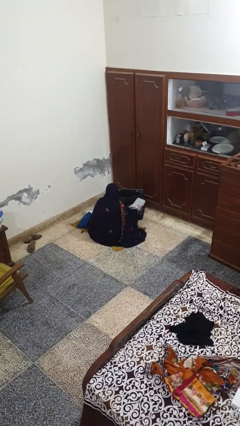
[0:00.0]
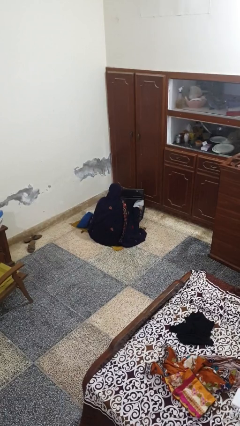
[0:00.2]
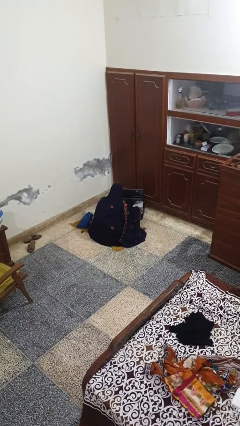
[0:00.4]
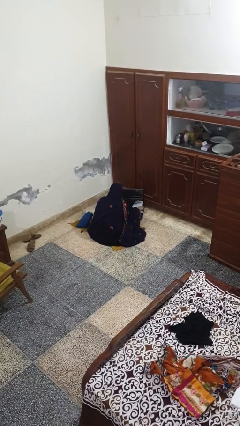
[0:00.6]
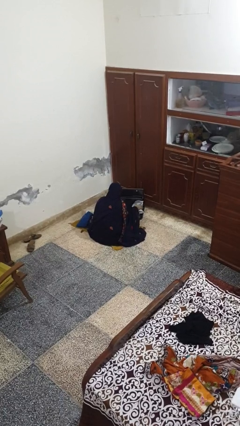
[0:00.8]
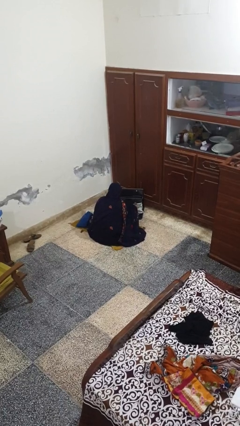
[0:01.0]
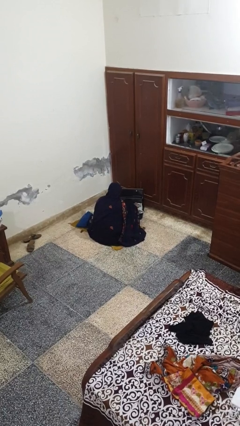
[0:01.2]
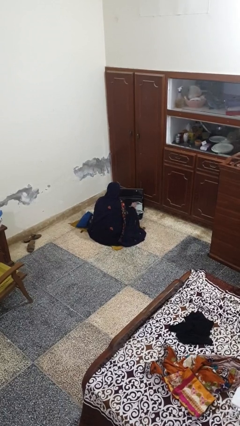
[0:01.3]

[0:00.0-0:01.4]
person loads clothes into suitcase

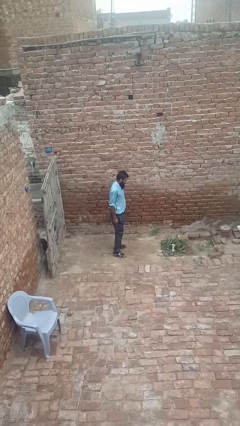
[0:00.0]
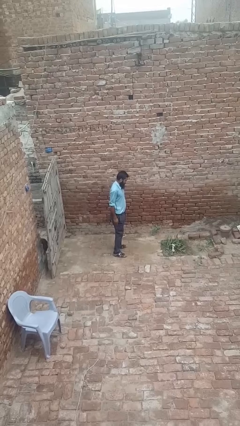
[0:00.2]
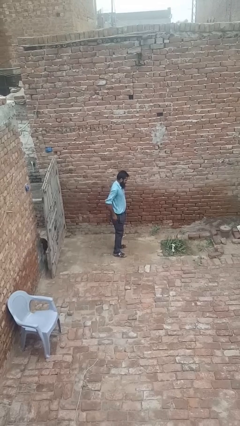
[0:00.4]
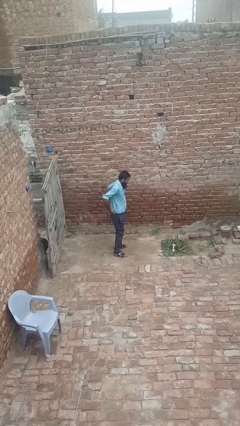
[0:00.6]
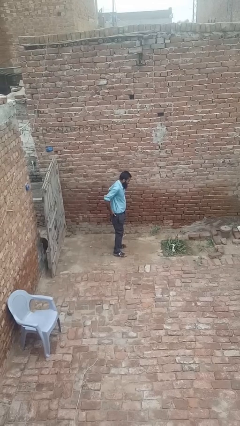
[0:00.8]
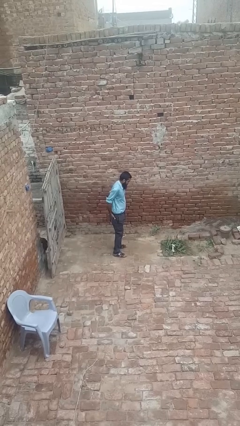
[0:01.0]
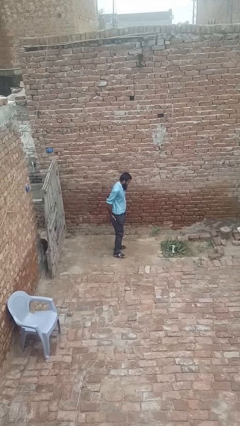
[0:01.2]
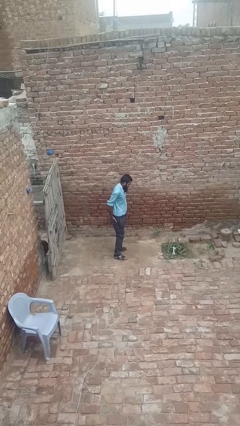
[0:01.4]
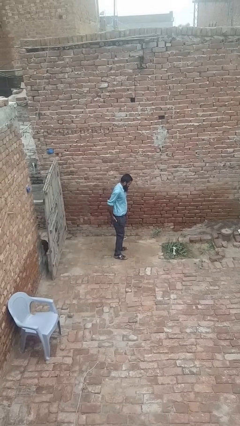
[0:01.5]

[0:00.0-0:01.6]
person puts hands in back pockets

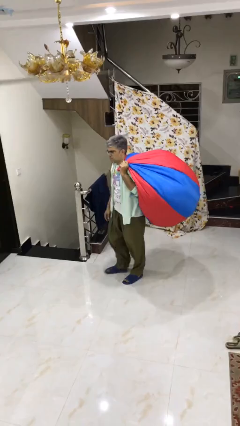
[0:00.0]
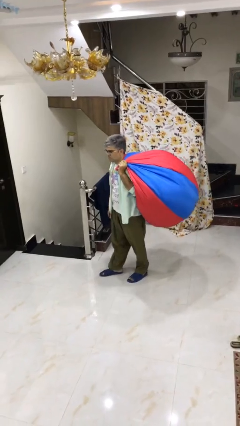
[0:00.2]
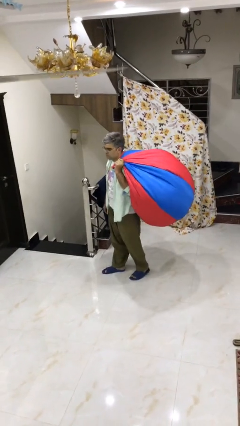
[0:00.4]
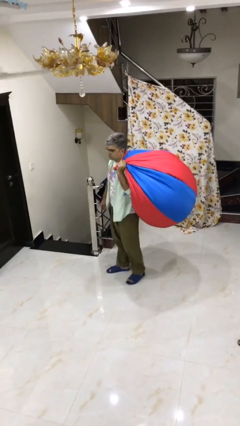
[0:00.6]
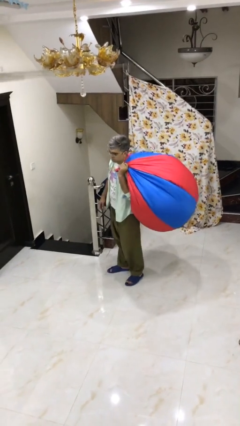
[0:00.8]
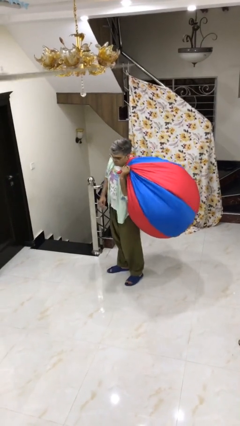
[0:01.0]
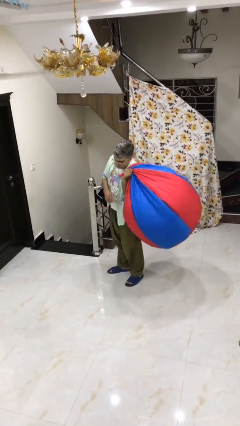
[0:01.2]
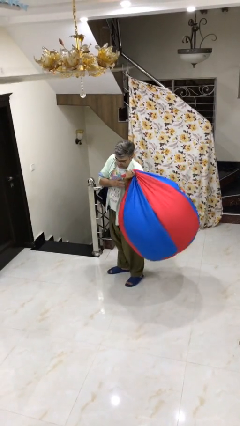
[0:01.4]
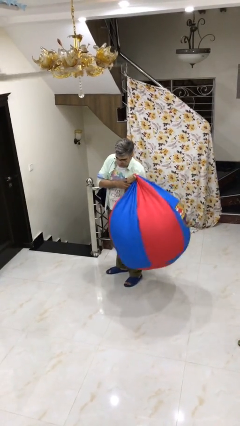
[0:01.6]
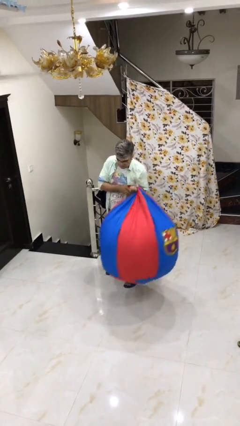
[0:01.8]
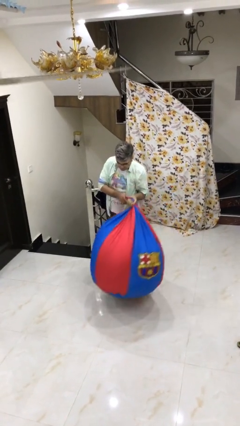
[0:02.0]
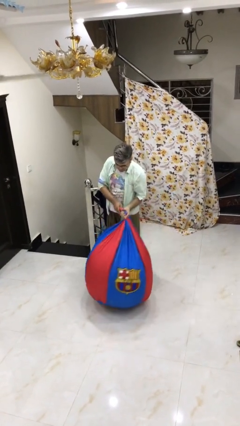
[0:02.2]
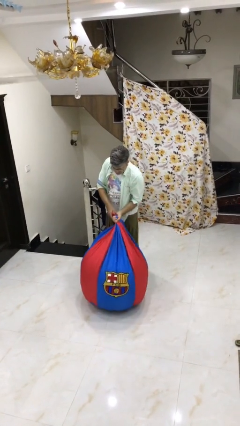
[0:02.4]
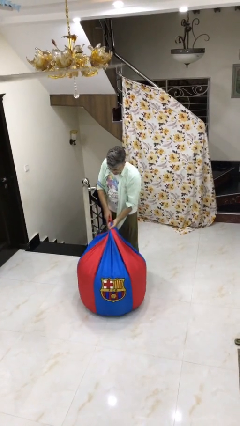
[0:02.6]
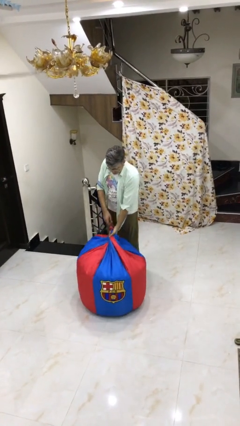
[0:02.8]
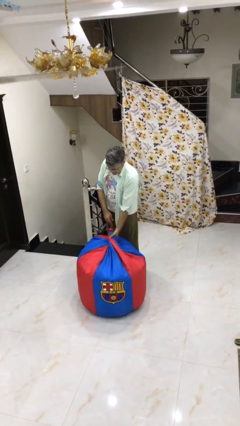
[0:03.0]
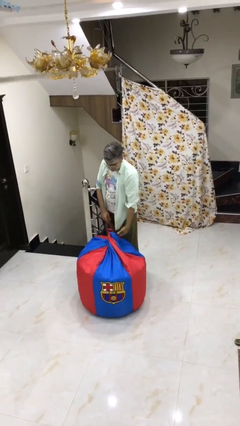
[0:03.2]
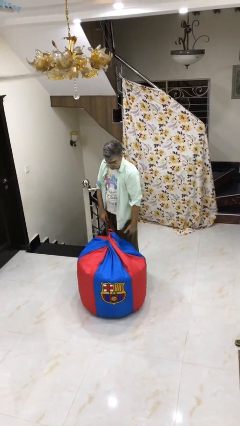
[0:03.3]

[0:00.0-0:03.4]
person puts down object on floor

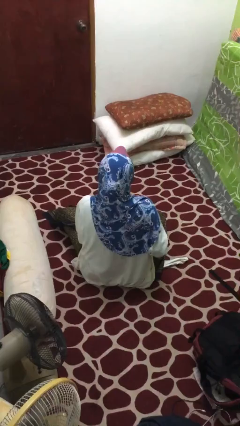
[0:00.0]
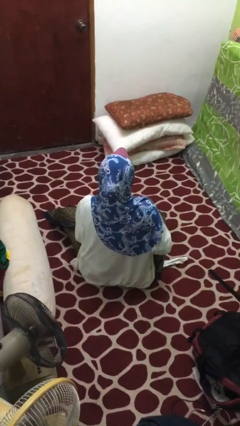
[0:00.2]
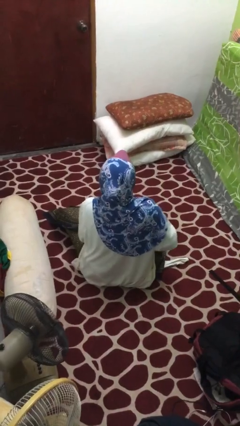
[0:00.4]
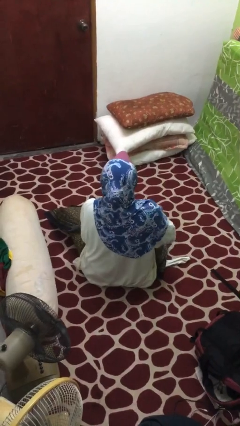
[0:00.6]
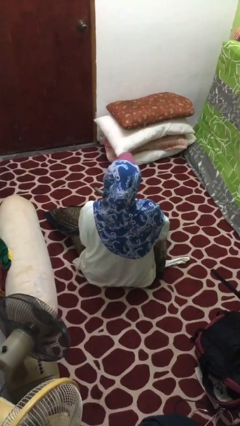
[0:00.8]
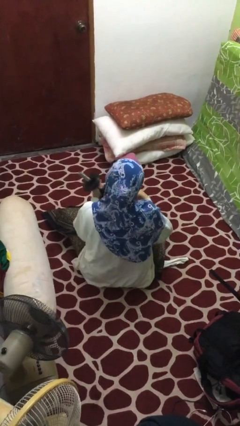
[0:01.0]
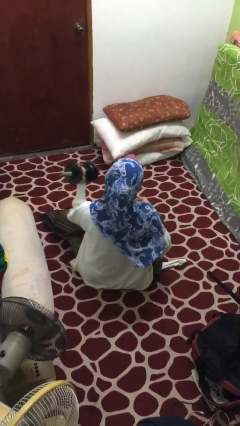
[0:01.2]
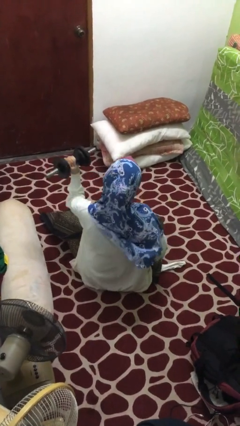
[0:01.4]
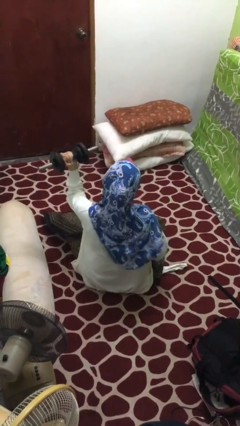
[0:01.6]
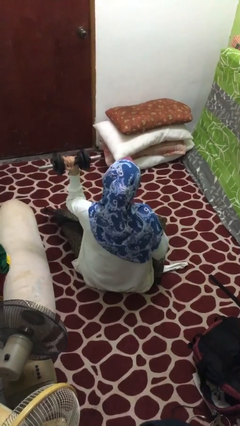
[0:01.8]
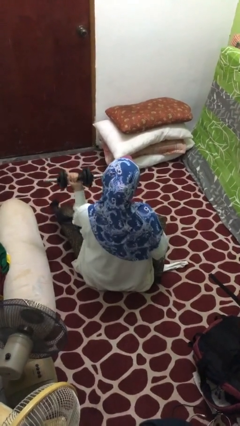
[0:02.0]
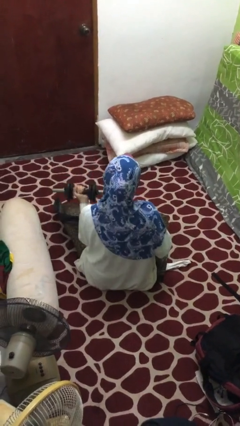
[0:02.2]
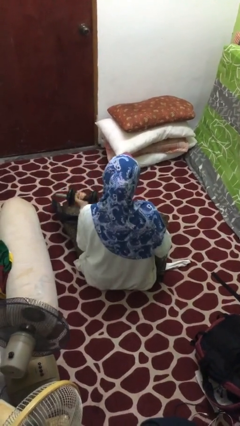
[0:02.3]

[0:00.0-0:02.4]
person lifts dumbbells

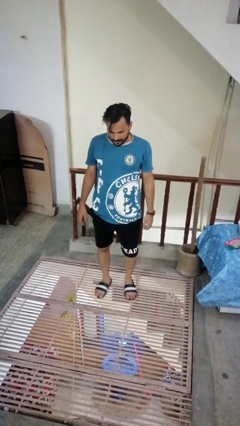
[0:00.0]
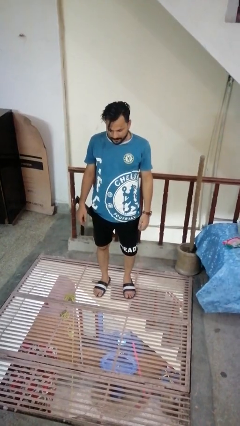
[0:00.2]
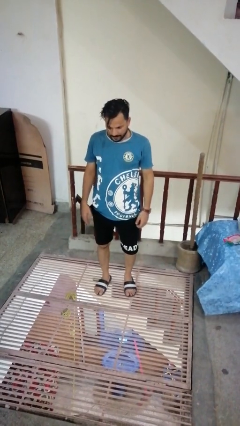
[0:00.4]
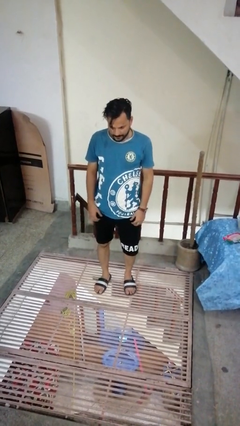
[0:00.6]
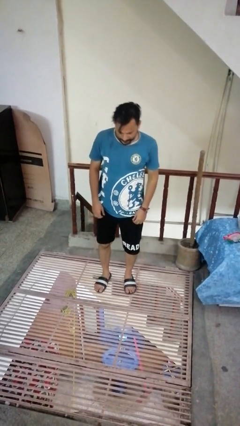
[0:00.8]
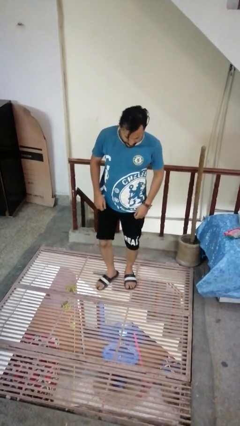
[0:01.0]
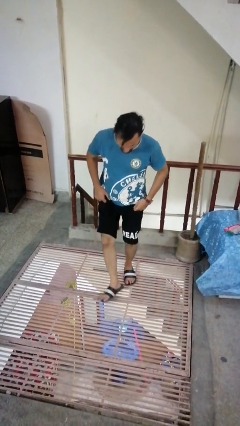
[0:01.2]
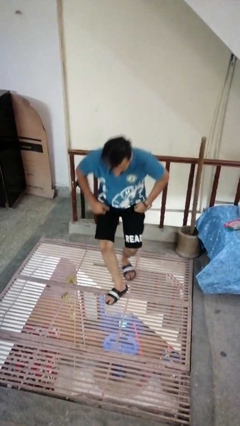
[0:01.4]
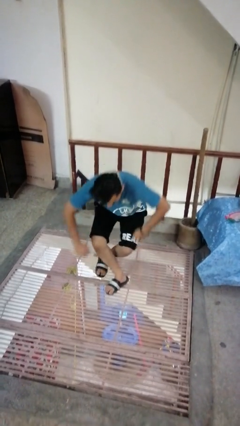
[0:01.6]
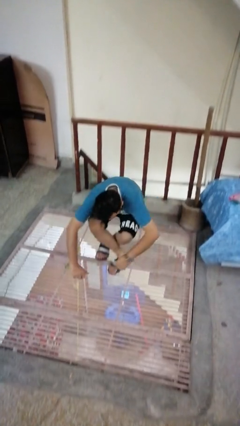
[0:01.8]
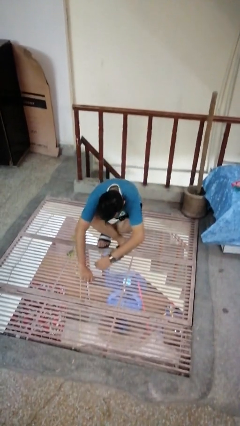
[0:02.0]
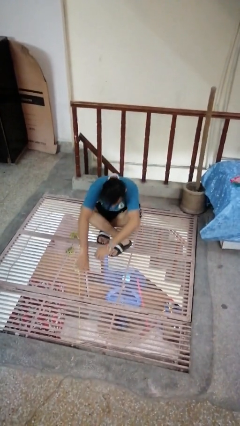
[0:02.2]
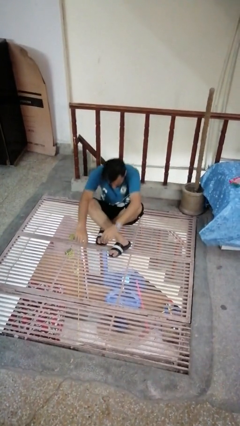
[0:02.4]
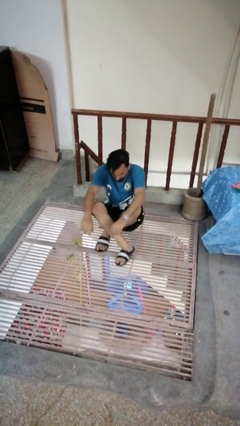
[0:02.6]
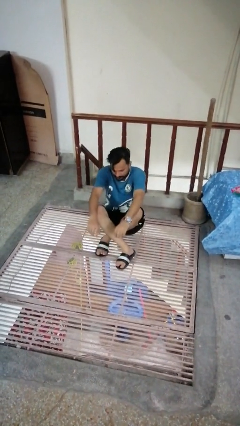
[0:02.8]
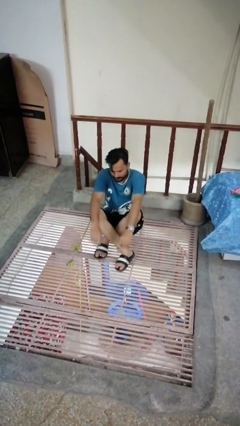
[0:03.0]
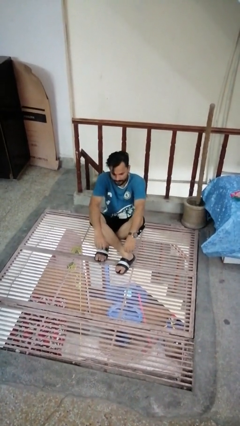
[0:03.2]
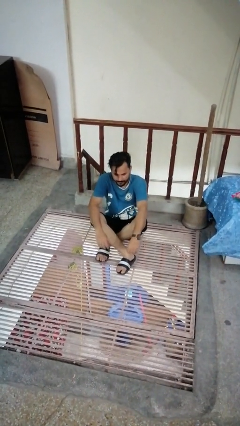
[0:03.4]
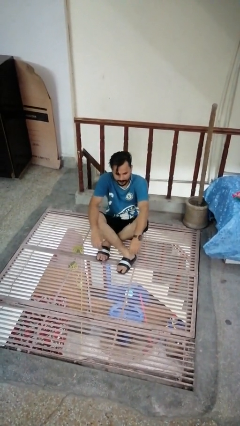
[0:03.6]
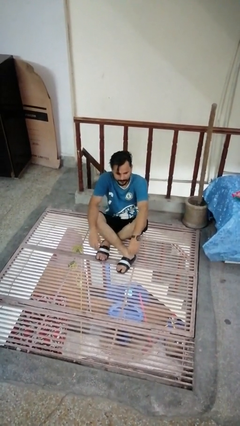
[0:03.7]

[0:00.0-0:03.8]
person sits crisscross

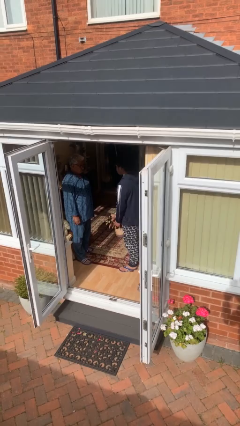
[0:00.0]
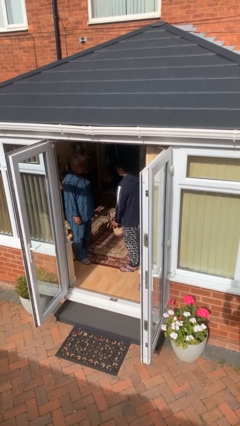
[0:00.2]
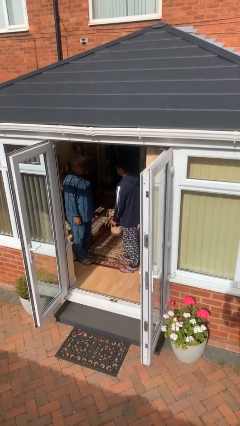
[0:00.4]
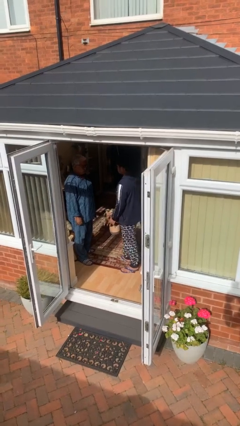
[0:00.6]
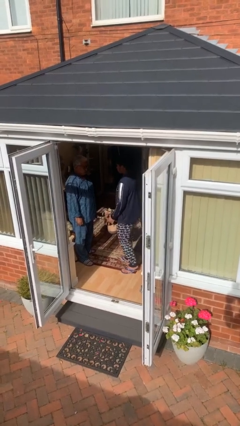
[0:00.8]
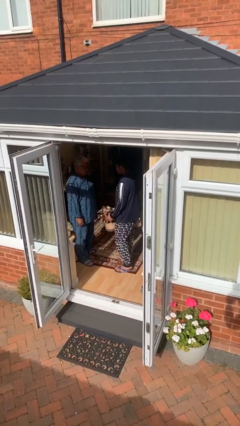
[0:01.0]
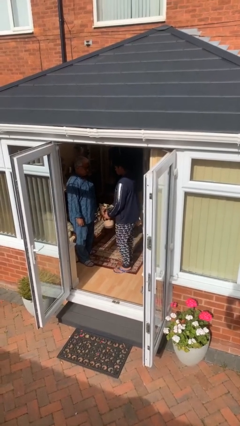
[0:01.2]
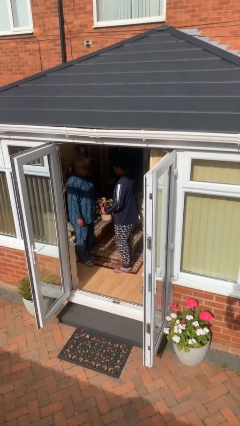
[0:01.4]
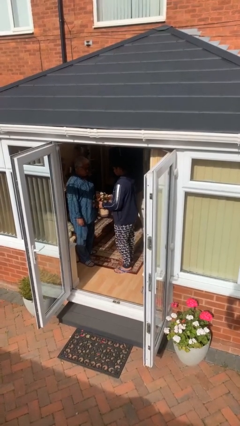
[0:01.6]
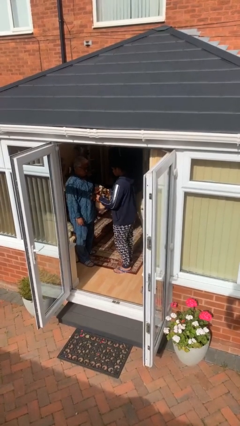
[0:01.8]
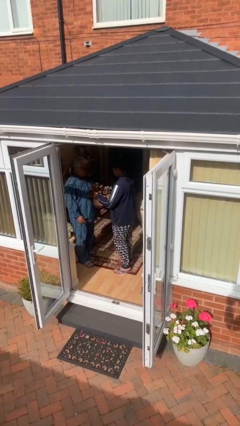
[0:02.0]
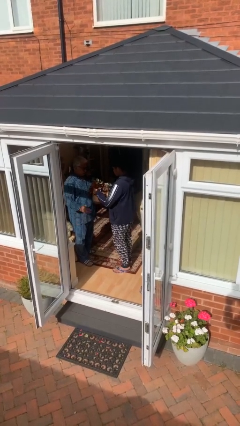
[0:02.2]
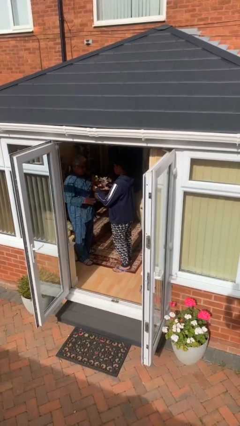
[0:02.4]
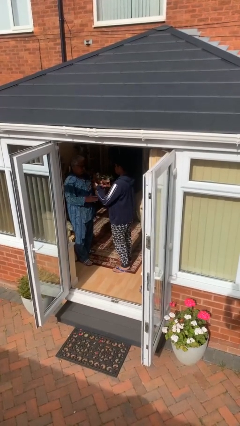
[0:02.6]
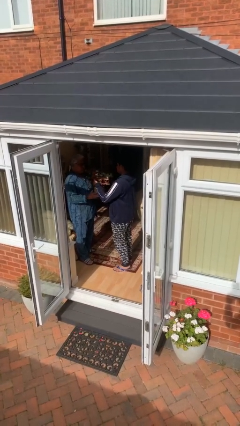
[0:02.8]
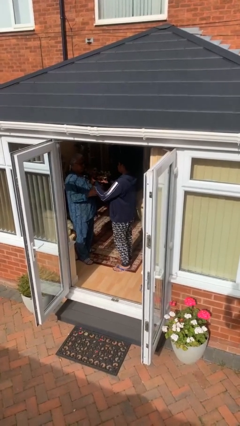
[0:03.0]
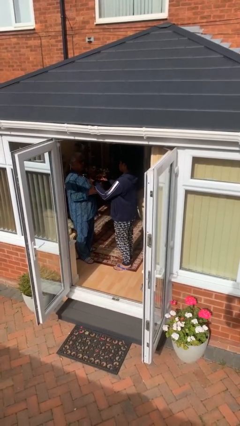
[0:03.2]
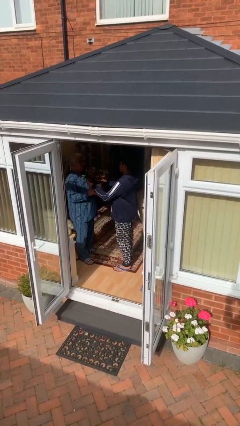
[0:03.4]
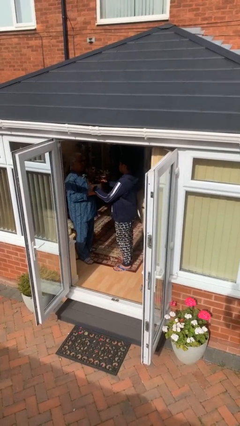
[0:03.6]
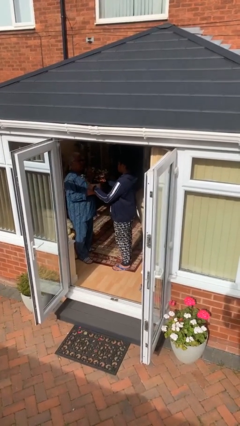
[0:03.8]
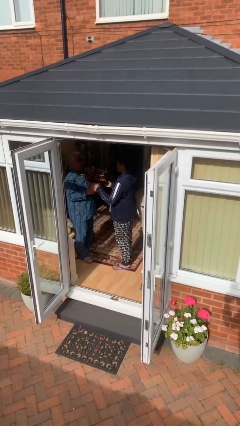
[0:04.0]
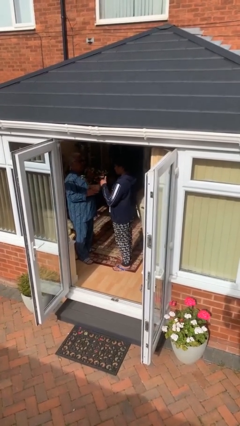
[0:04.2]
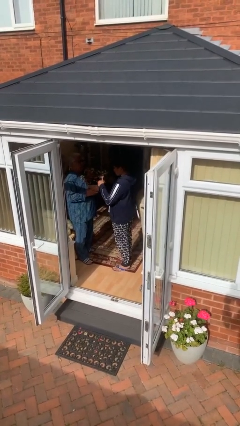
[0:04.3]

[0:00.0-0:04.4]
person transfers object to person

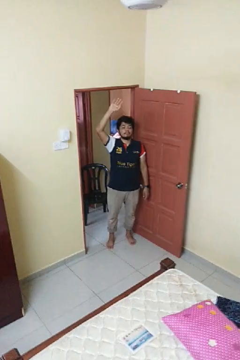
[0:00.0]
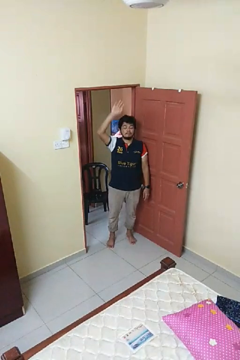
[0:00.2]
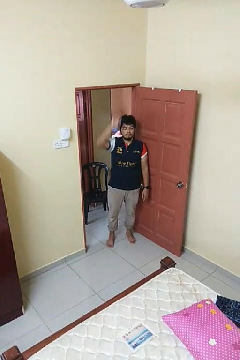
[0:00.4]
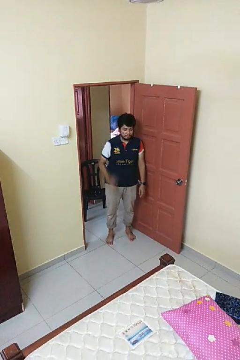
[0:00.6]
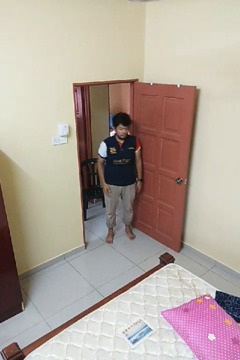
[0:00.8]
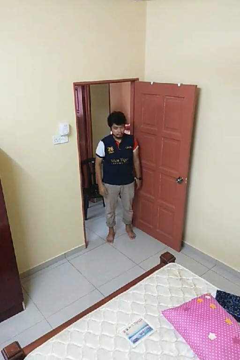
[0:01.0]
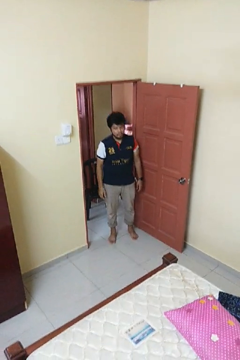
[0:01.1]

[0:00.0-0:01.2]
person gestures lower hand
